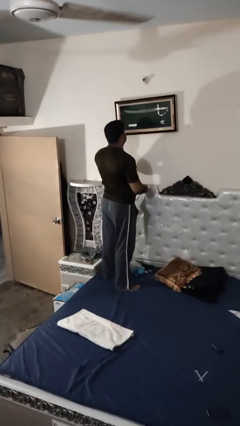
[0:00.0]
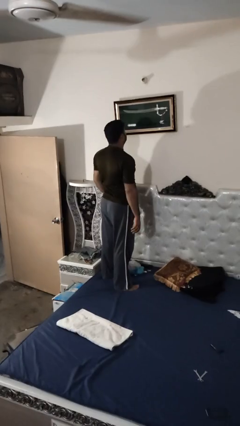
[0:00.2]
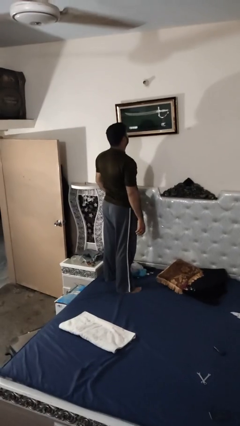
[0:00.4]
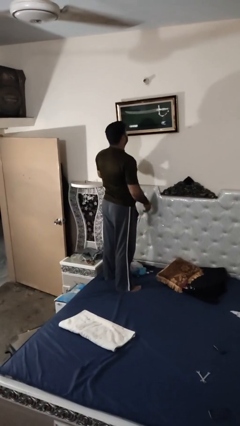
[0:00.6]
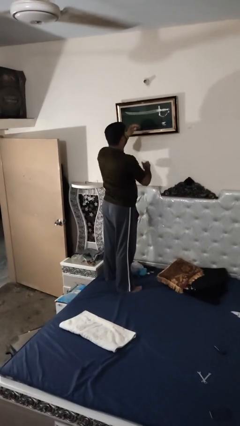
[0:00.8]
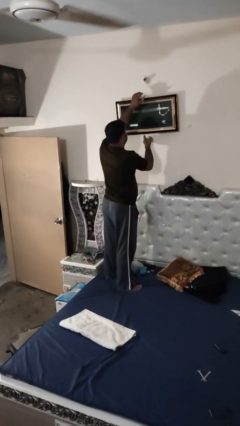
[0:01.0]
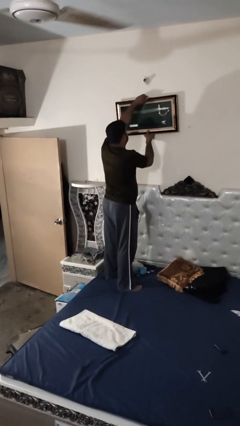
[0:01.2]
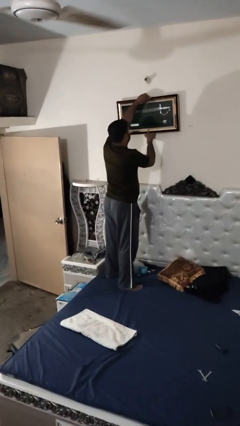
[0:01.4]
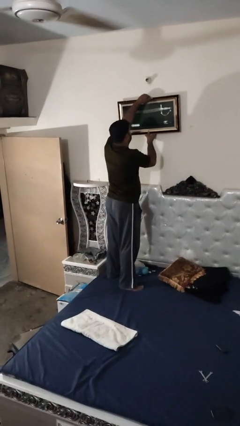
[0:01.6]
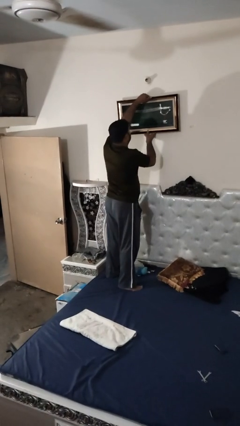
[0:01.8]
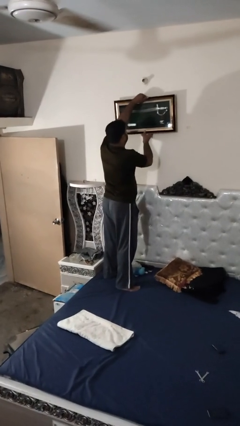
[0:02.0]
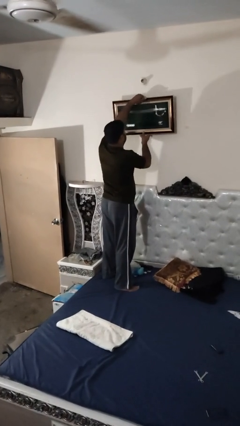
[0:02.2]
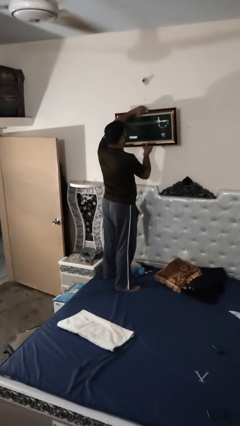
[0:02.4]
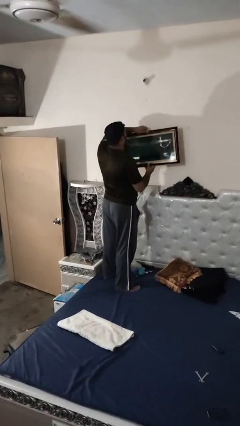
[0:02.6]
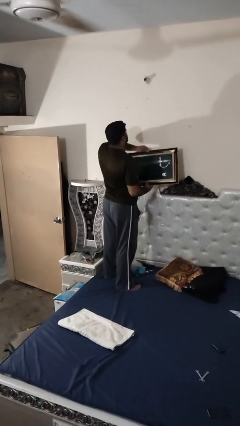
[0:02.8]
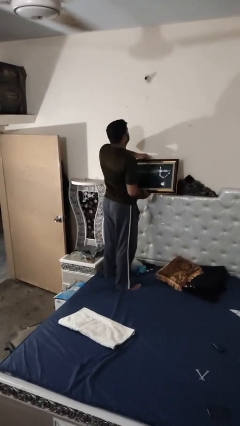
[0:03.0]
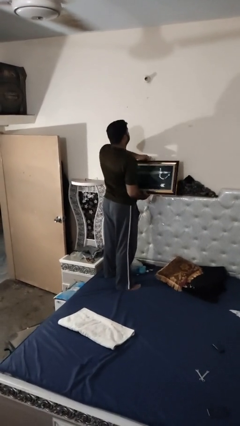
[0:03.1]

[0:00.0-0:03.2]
person takes down picture frame

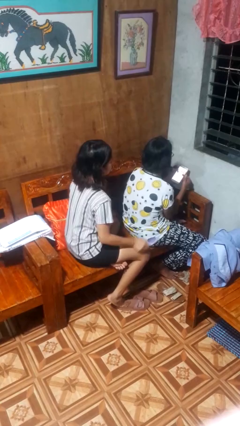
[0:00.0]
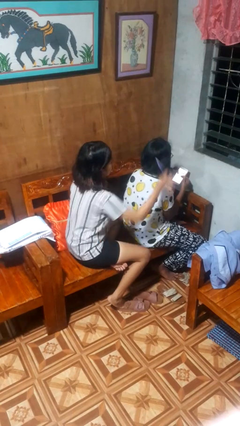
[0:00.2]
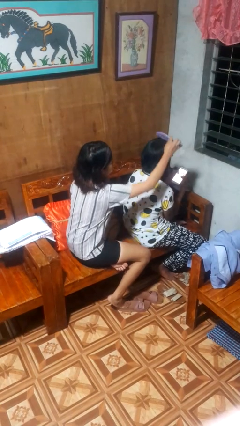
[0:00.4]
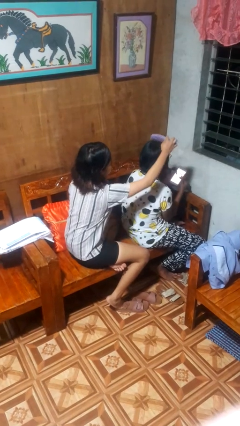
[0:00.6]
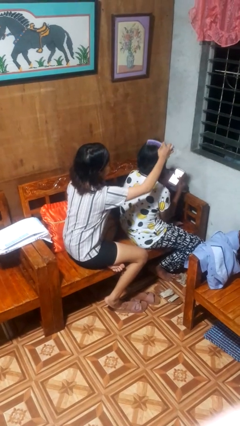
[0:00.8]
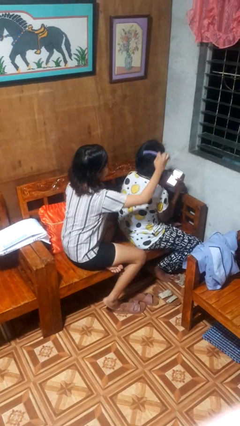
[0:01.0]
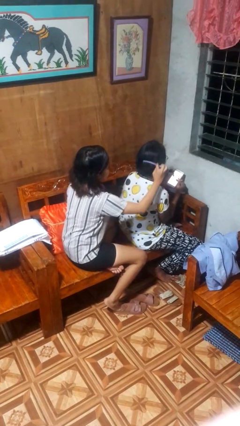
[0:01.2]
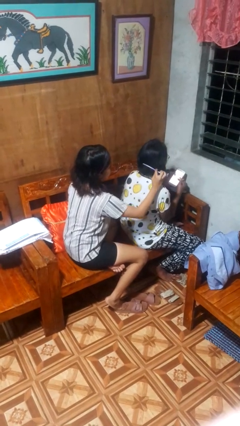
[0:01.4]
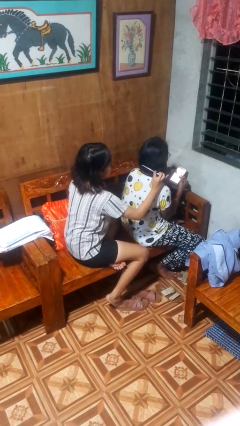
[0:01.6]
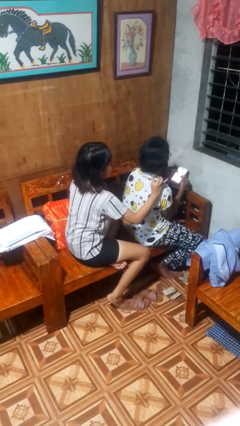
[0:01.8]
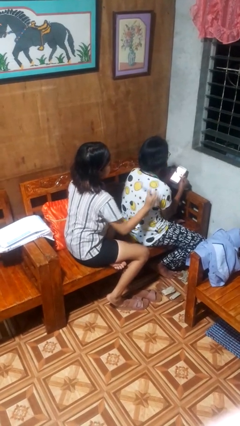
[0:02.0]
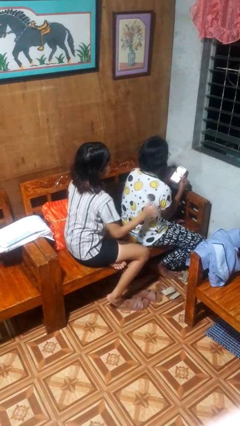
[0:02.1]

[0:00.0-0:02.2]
person brushes hair of person

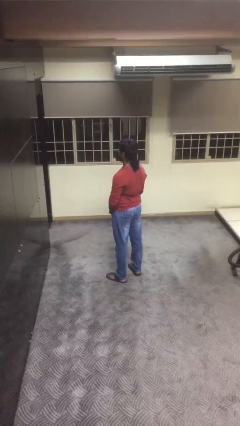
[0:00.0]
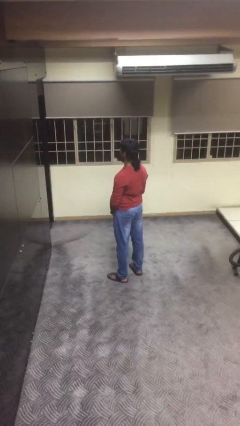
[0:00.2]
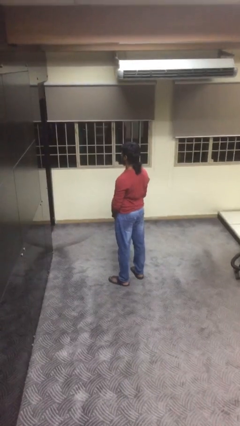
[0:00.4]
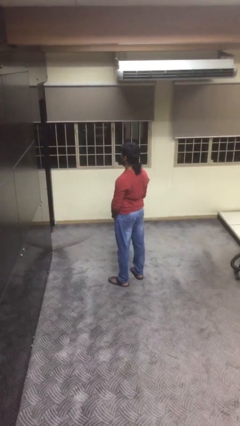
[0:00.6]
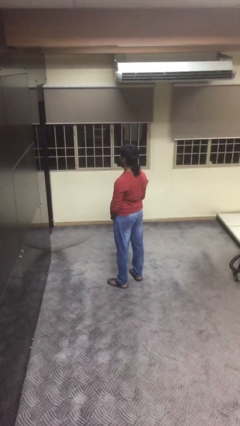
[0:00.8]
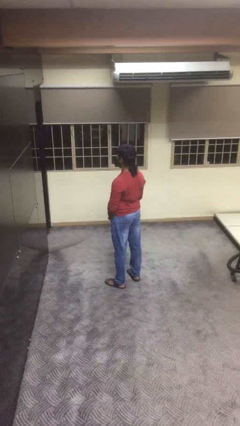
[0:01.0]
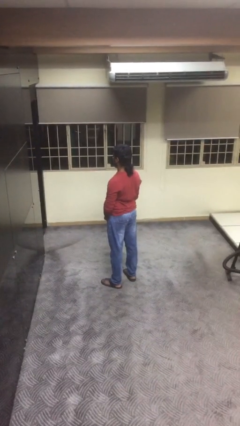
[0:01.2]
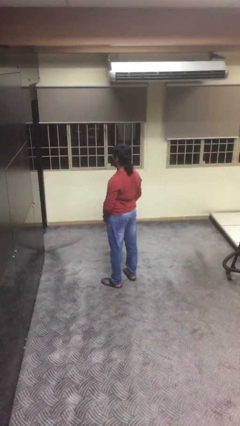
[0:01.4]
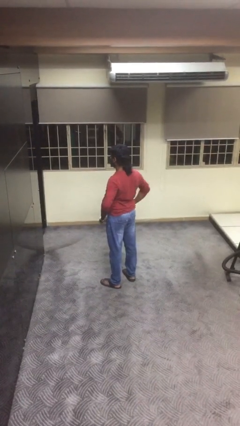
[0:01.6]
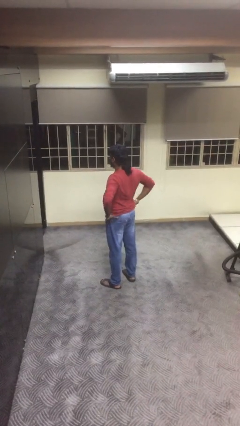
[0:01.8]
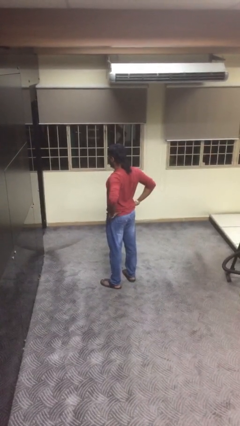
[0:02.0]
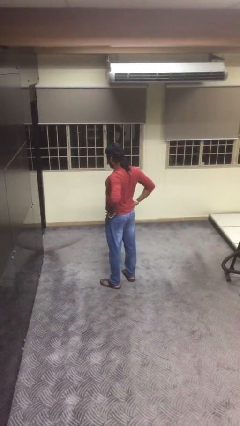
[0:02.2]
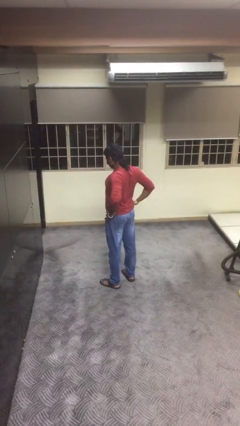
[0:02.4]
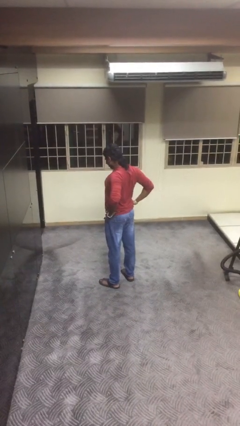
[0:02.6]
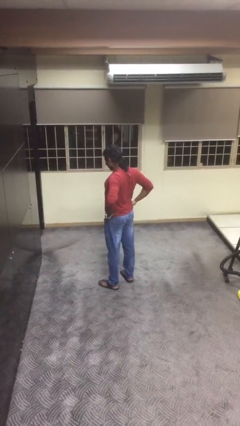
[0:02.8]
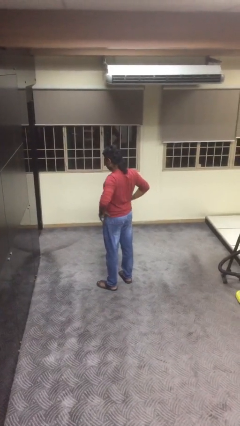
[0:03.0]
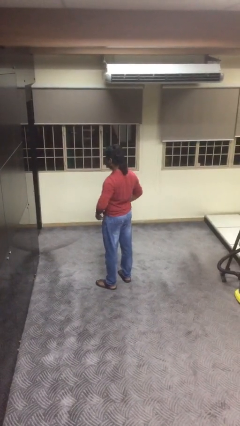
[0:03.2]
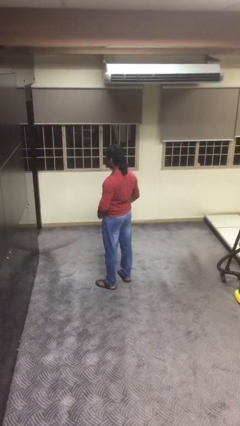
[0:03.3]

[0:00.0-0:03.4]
person stretches back

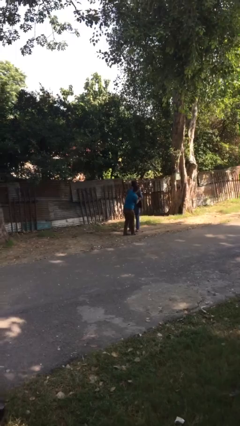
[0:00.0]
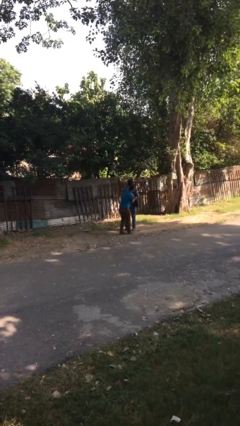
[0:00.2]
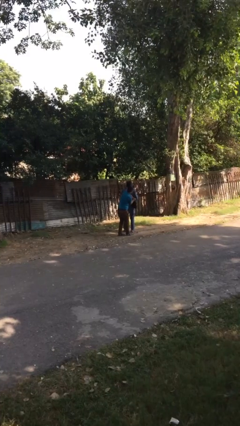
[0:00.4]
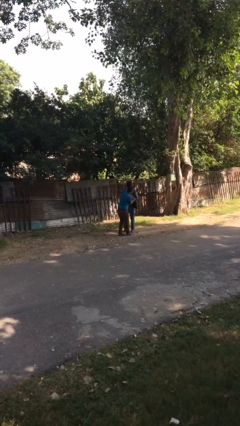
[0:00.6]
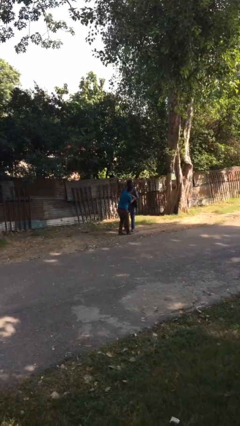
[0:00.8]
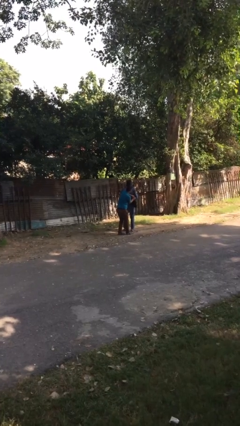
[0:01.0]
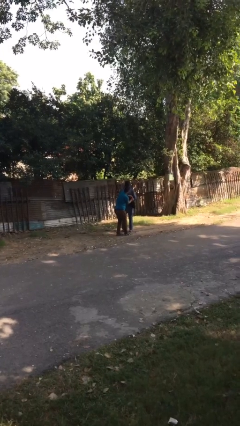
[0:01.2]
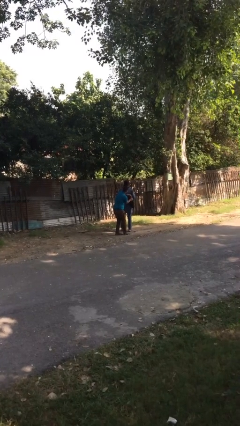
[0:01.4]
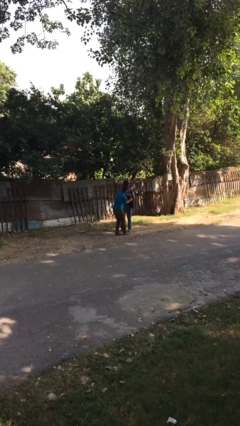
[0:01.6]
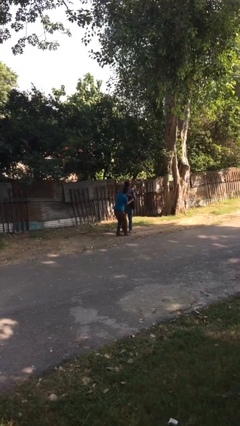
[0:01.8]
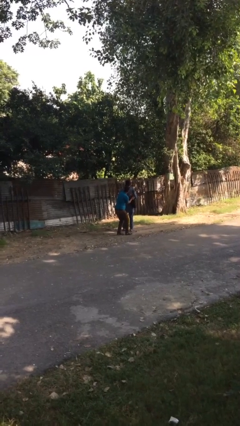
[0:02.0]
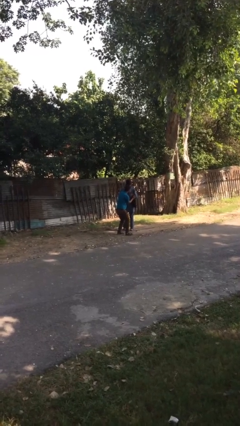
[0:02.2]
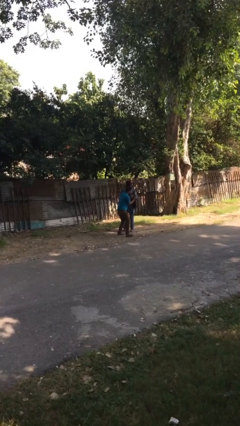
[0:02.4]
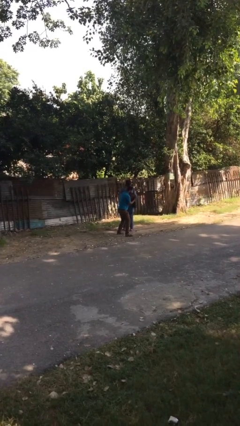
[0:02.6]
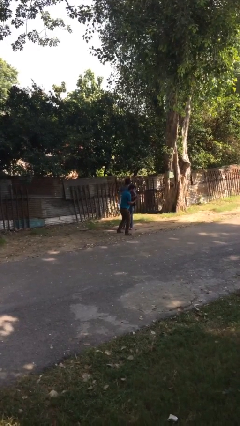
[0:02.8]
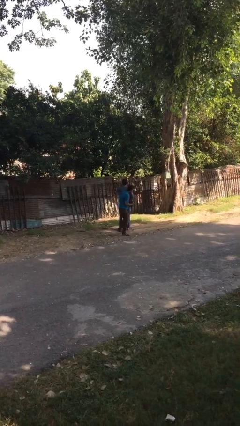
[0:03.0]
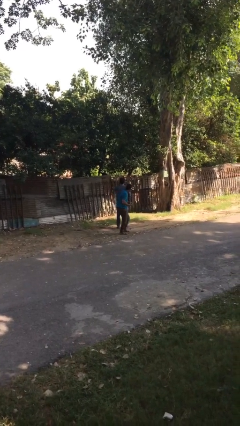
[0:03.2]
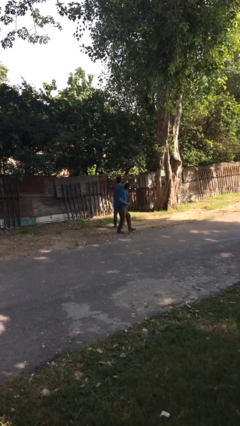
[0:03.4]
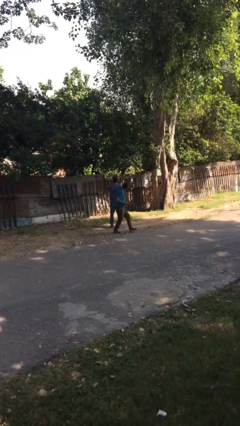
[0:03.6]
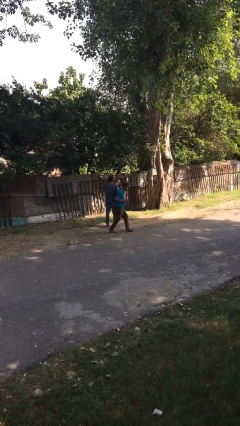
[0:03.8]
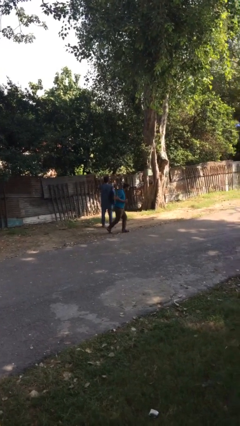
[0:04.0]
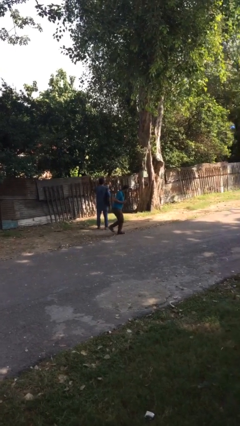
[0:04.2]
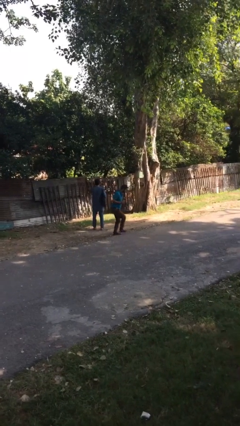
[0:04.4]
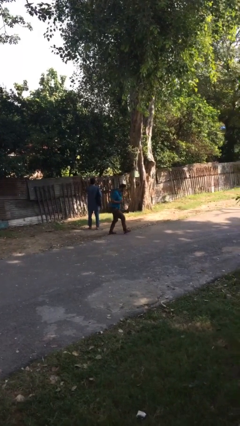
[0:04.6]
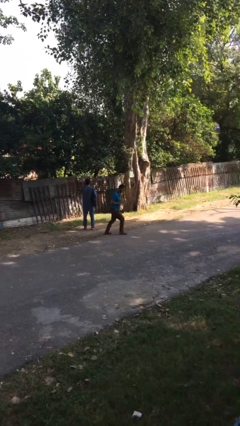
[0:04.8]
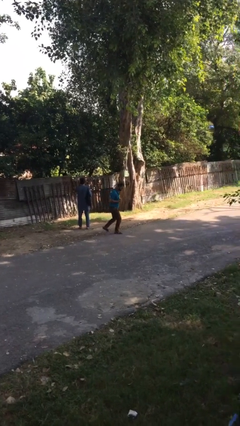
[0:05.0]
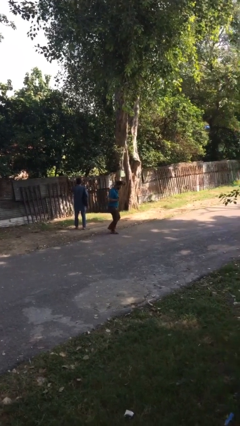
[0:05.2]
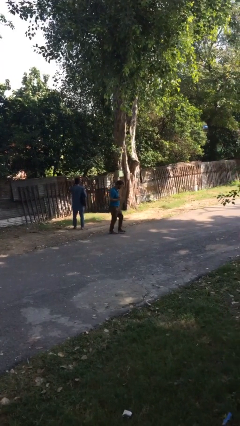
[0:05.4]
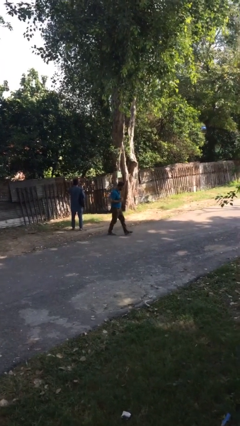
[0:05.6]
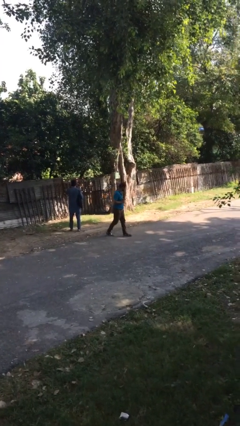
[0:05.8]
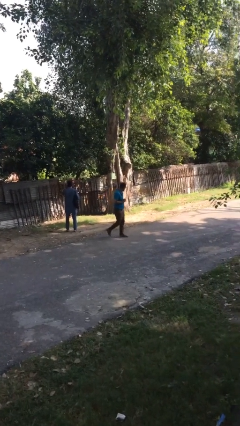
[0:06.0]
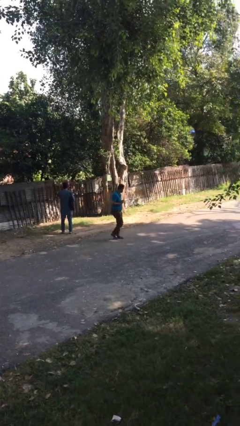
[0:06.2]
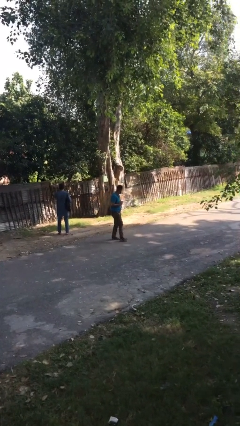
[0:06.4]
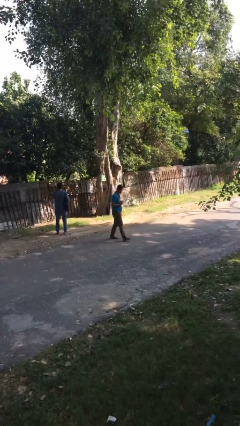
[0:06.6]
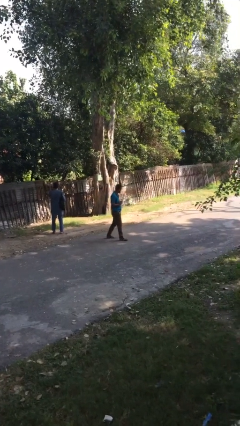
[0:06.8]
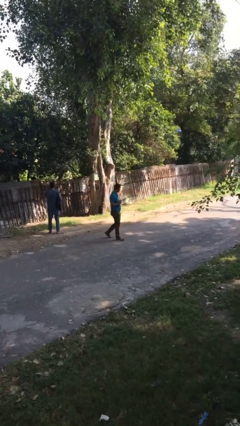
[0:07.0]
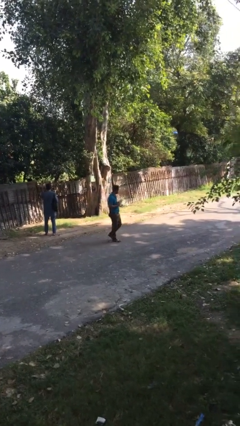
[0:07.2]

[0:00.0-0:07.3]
person steals object from person

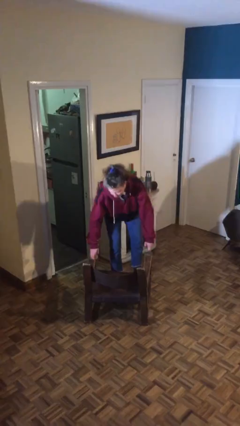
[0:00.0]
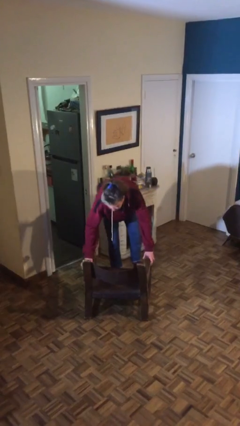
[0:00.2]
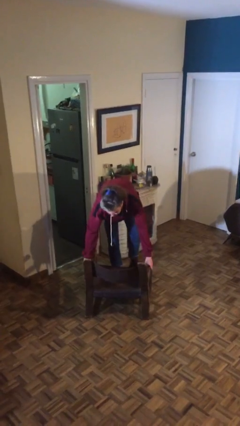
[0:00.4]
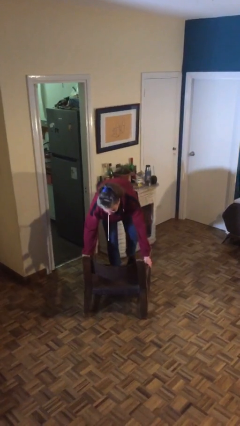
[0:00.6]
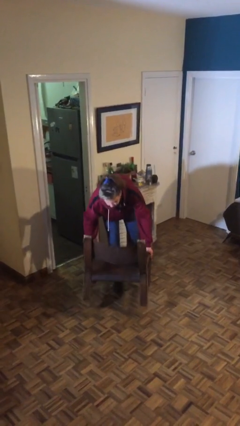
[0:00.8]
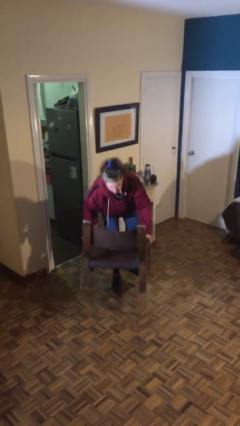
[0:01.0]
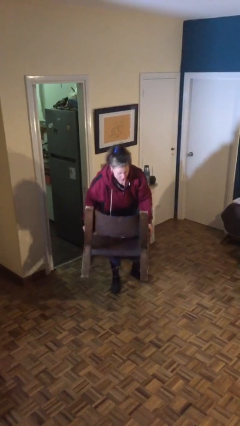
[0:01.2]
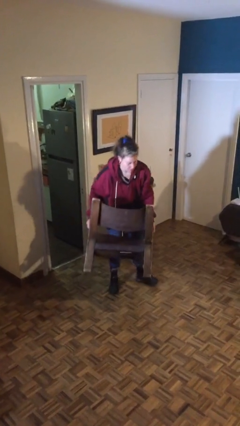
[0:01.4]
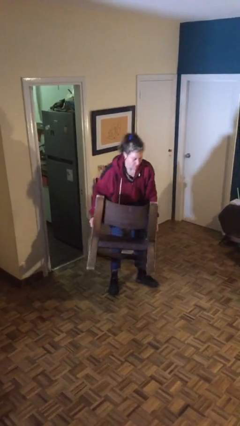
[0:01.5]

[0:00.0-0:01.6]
person picks up object from floor
